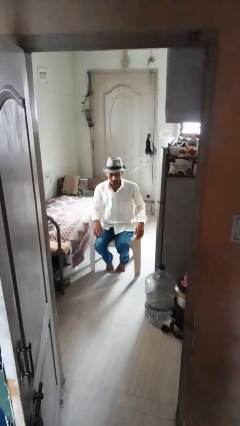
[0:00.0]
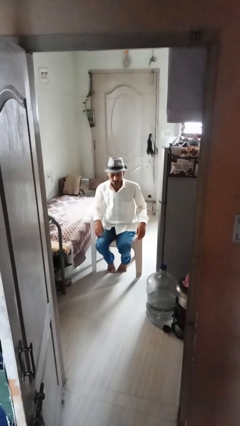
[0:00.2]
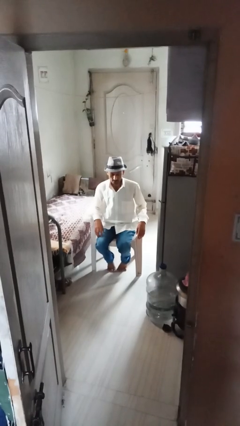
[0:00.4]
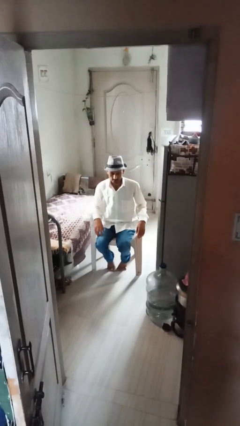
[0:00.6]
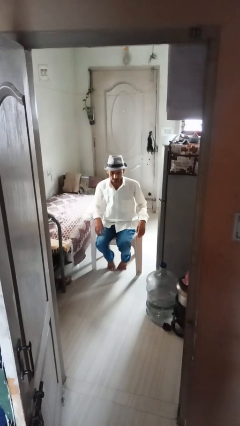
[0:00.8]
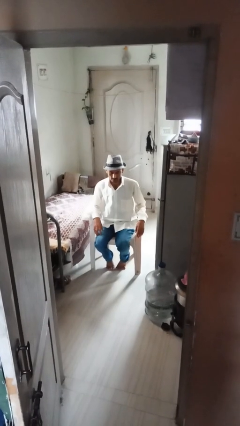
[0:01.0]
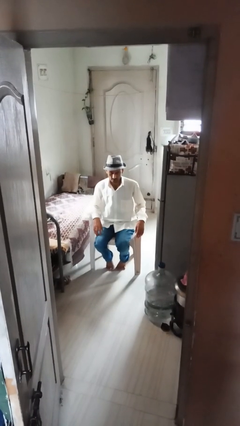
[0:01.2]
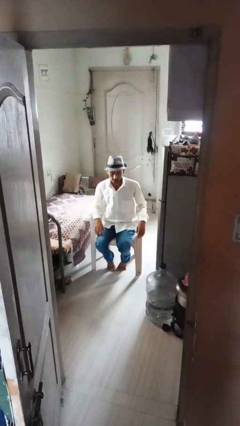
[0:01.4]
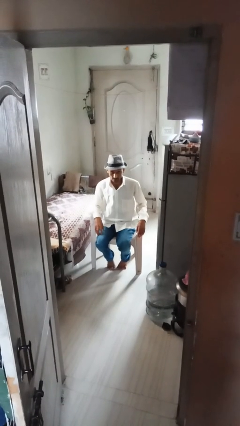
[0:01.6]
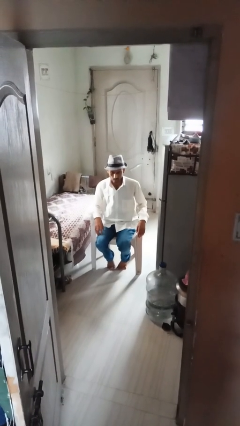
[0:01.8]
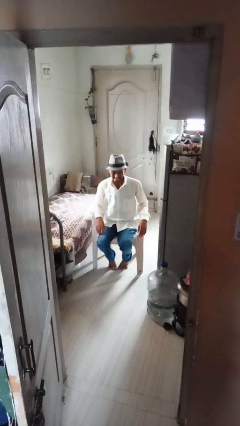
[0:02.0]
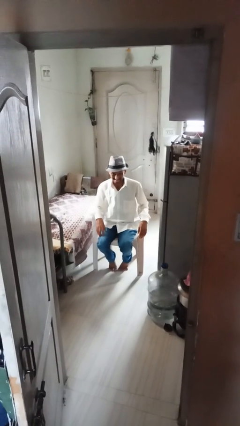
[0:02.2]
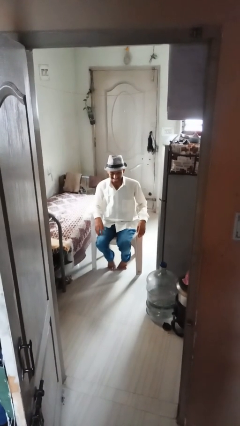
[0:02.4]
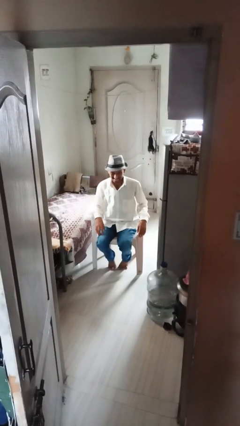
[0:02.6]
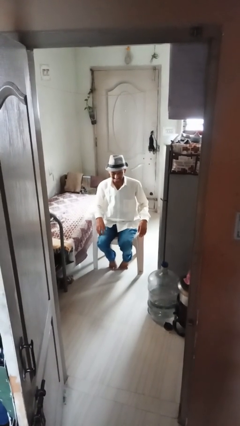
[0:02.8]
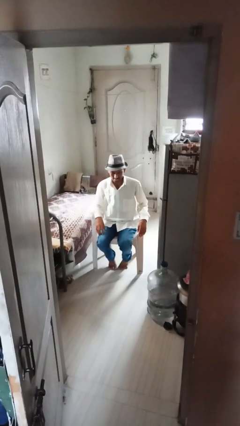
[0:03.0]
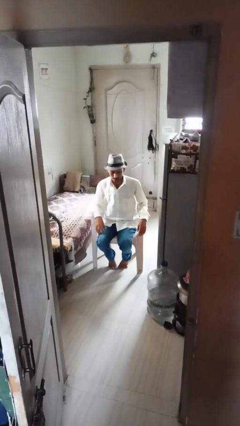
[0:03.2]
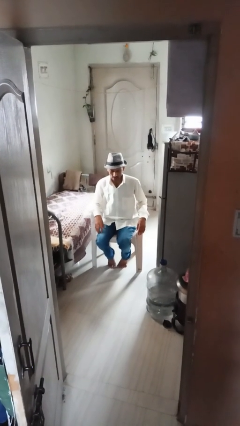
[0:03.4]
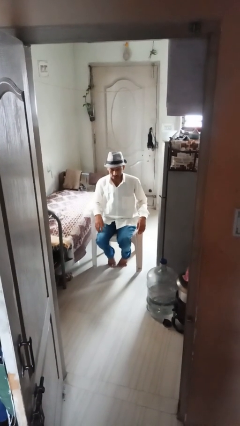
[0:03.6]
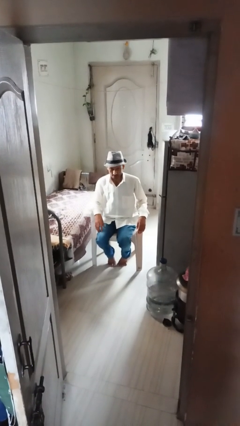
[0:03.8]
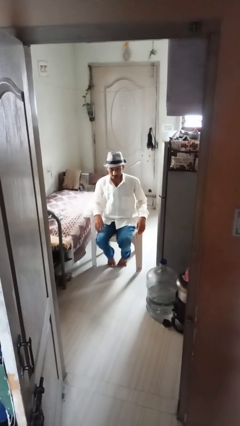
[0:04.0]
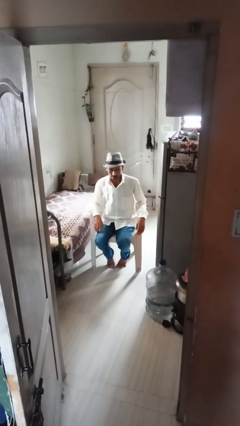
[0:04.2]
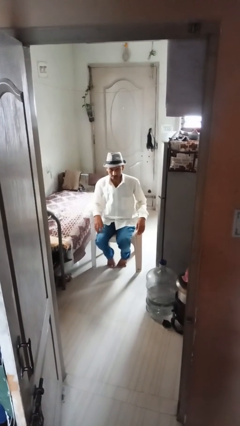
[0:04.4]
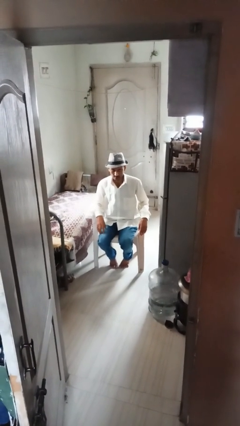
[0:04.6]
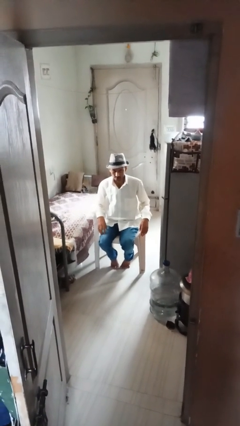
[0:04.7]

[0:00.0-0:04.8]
person sticks out tongue

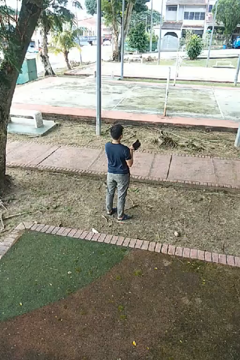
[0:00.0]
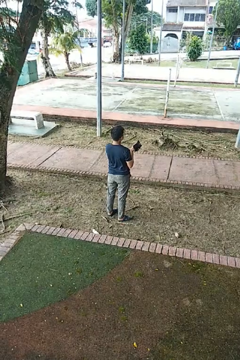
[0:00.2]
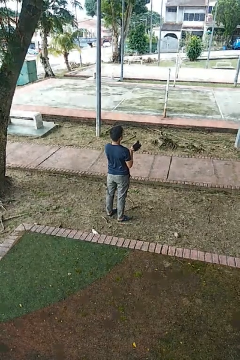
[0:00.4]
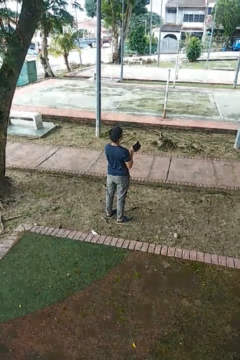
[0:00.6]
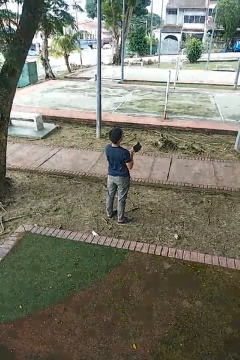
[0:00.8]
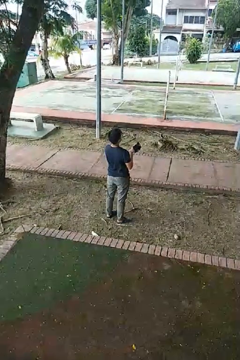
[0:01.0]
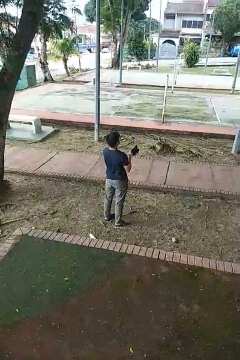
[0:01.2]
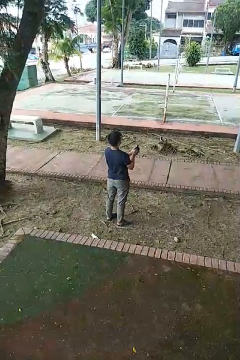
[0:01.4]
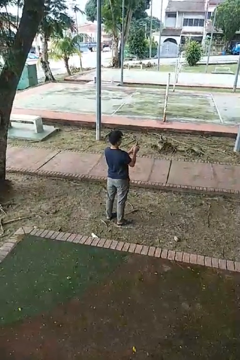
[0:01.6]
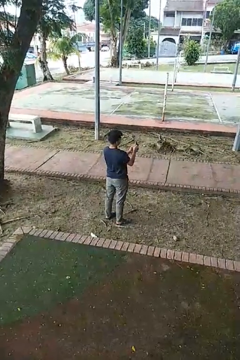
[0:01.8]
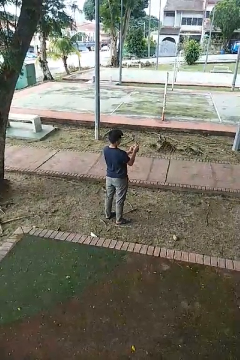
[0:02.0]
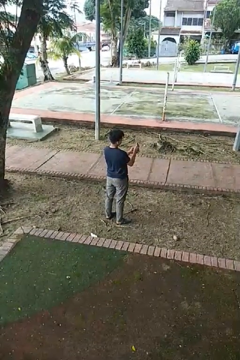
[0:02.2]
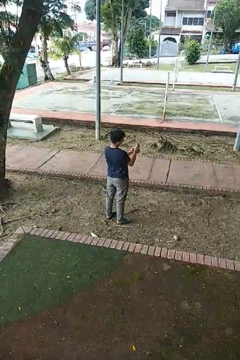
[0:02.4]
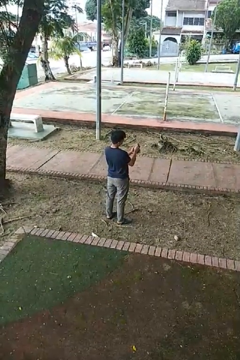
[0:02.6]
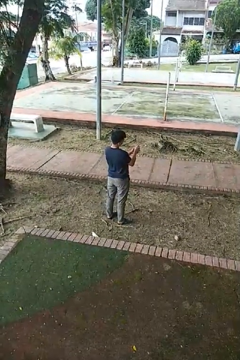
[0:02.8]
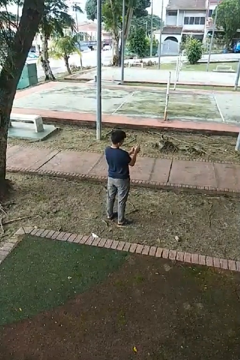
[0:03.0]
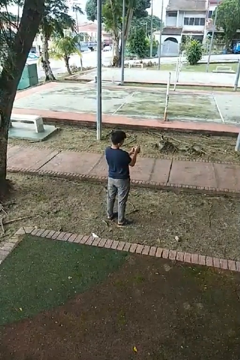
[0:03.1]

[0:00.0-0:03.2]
person searches in purse

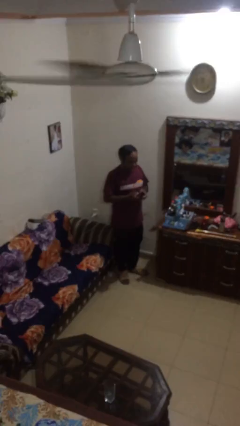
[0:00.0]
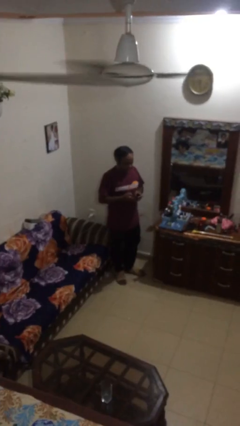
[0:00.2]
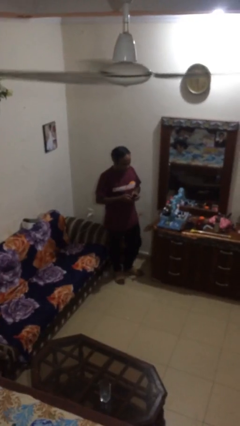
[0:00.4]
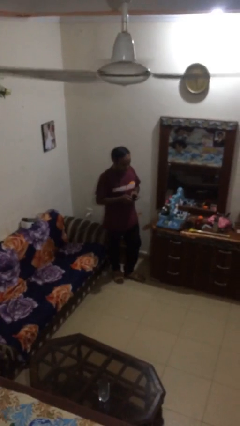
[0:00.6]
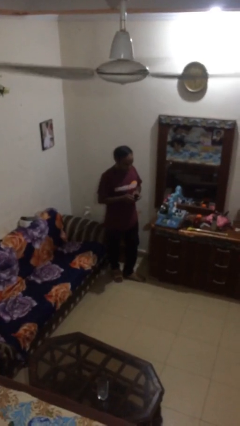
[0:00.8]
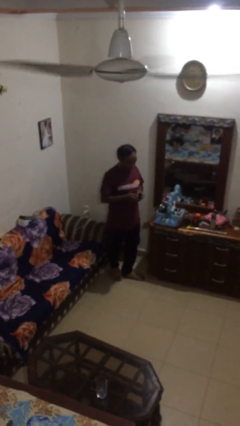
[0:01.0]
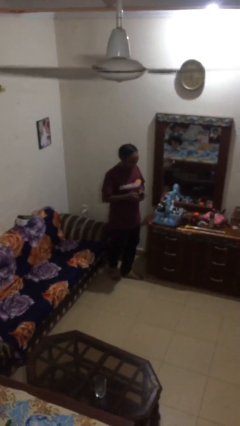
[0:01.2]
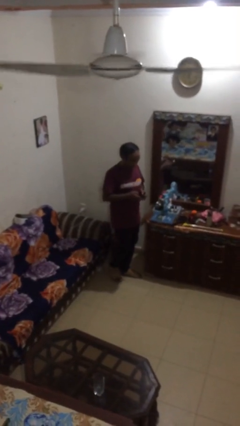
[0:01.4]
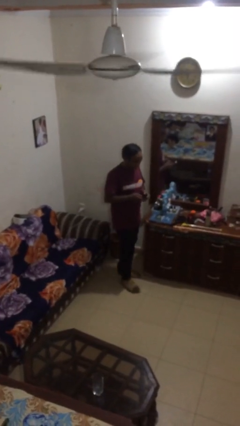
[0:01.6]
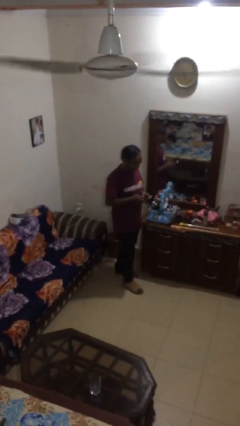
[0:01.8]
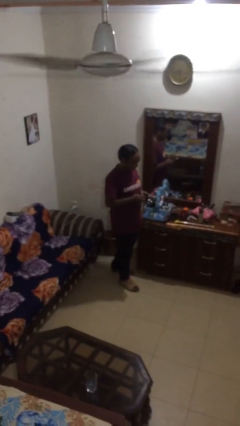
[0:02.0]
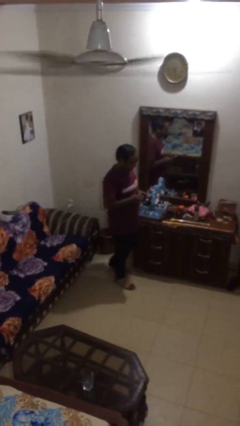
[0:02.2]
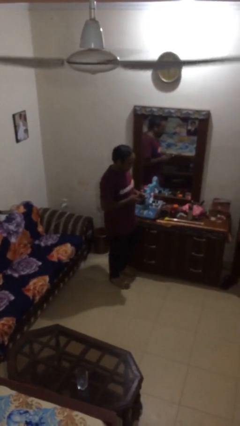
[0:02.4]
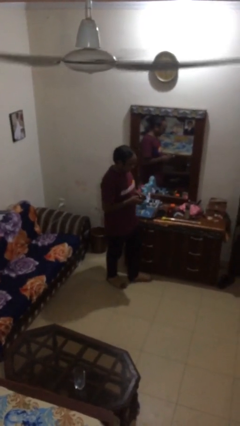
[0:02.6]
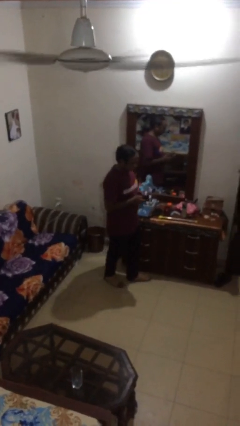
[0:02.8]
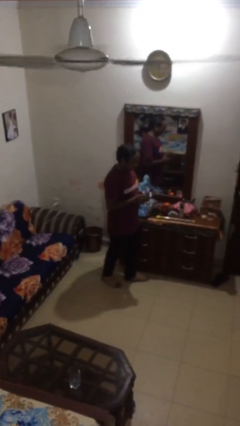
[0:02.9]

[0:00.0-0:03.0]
person texts on phone

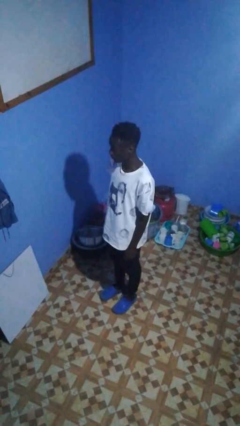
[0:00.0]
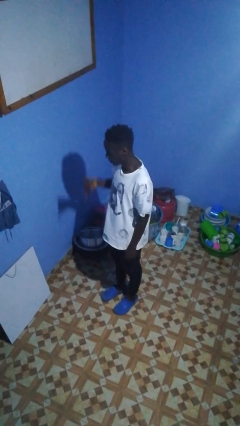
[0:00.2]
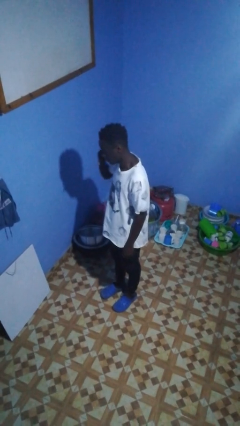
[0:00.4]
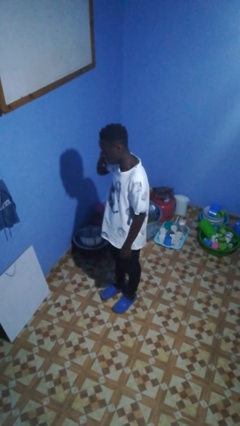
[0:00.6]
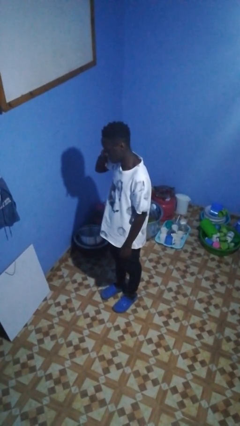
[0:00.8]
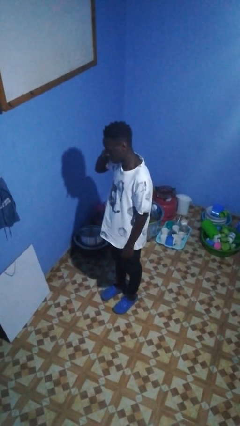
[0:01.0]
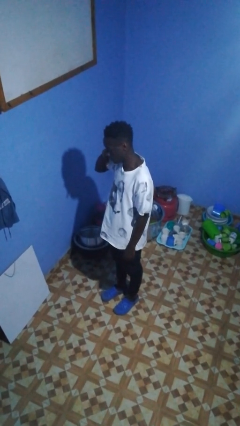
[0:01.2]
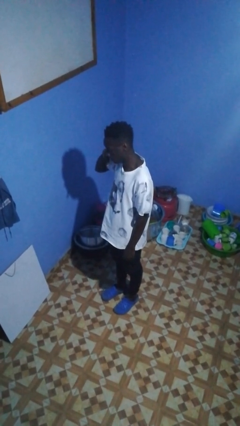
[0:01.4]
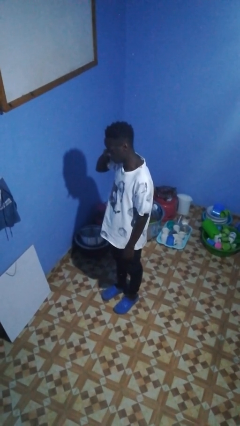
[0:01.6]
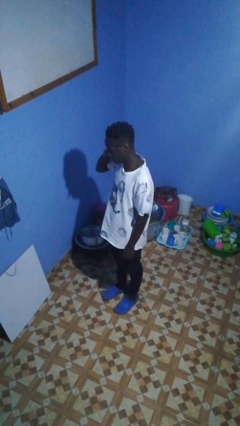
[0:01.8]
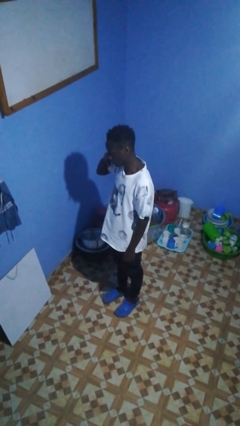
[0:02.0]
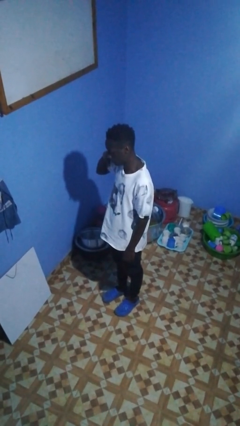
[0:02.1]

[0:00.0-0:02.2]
person gestures call me

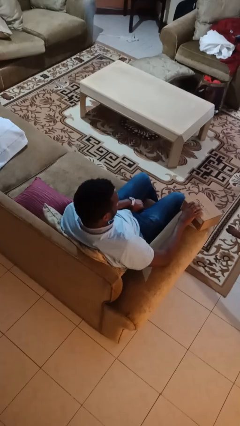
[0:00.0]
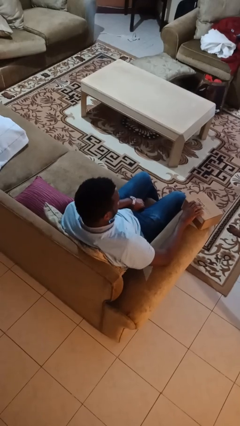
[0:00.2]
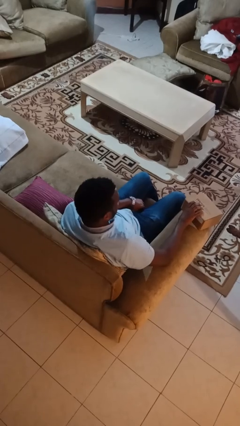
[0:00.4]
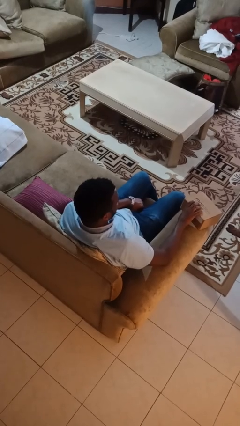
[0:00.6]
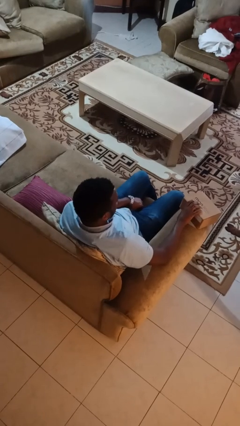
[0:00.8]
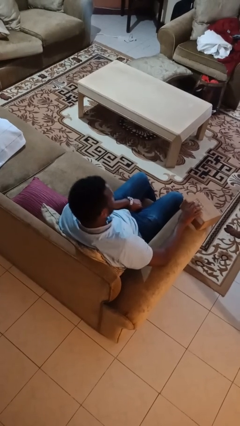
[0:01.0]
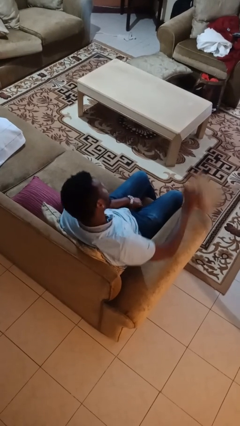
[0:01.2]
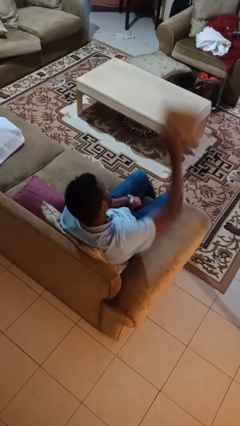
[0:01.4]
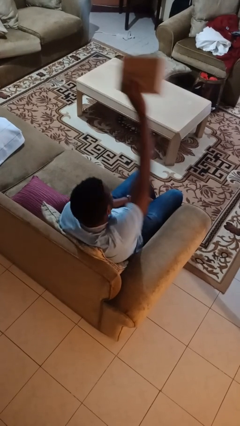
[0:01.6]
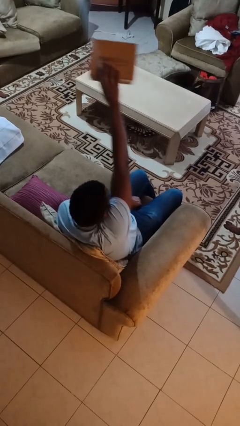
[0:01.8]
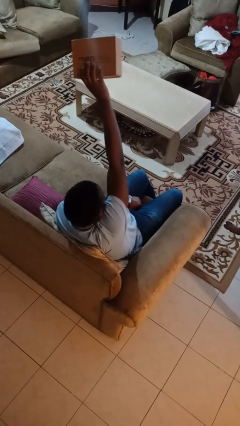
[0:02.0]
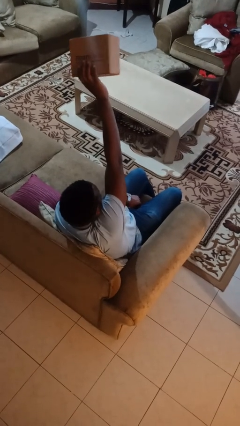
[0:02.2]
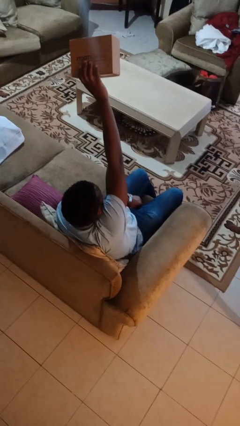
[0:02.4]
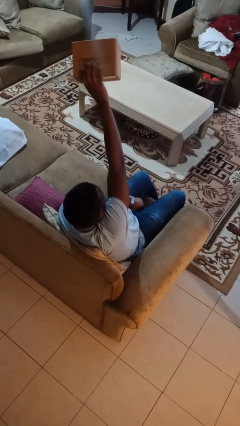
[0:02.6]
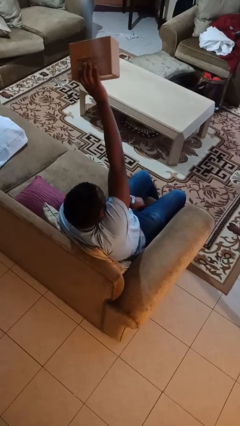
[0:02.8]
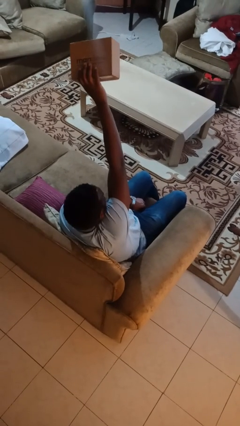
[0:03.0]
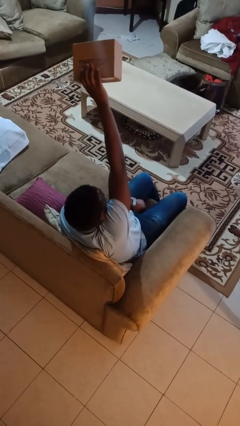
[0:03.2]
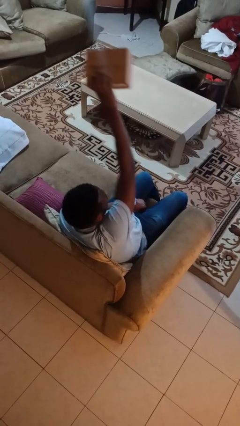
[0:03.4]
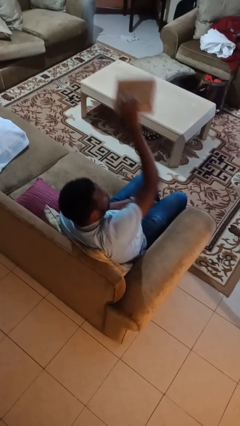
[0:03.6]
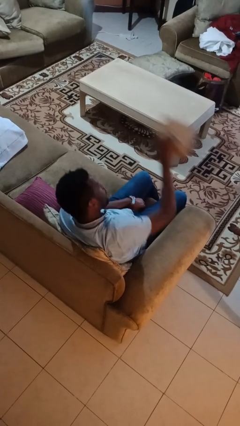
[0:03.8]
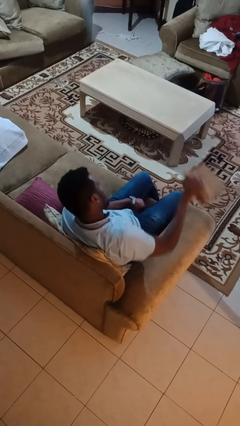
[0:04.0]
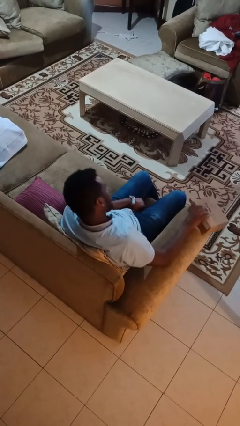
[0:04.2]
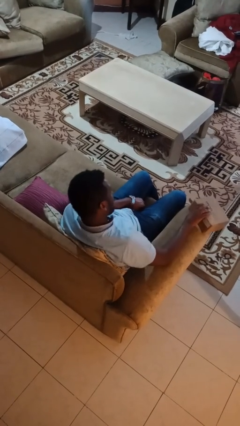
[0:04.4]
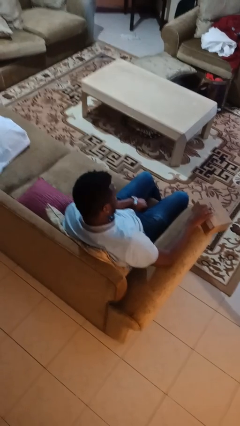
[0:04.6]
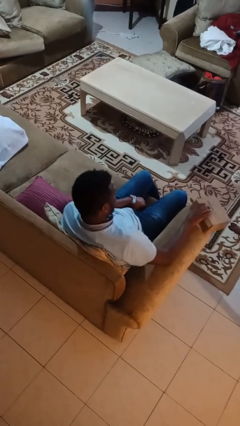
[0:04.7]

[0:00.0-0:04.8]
person holds object above head
